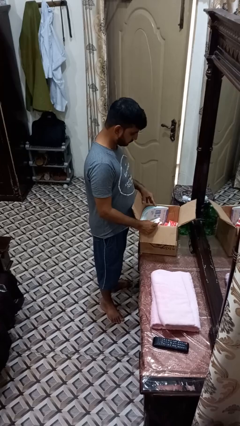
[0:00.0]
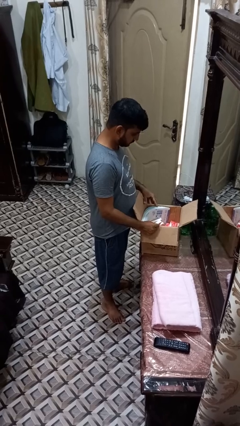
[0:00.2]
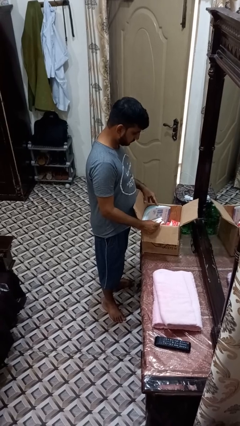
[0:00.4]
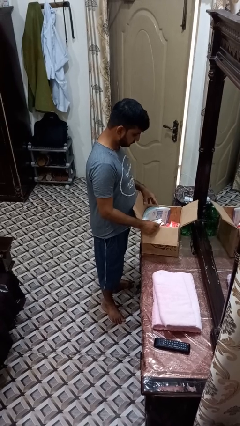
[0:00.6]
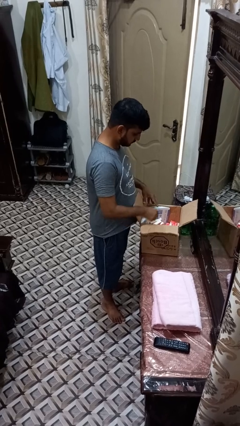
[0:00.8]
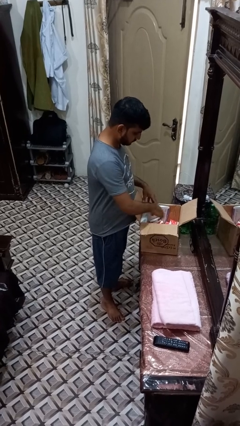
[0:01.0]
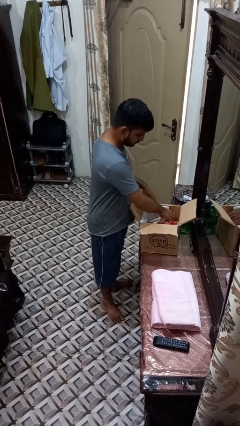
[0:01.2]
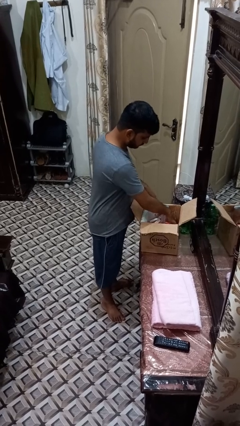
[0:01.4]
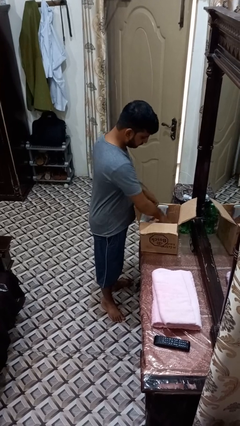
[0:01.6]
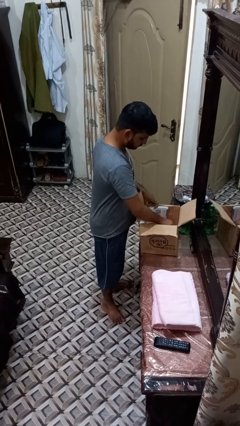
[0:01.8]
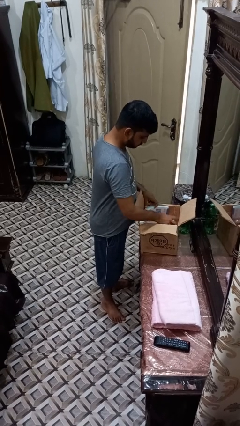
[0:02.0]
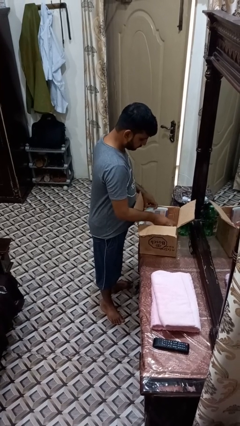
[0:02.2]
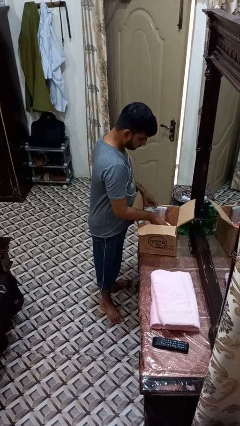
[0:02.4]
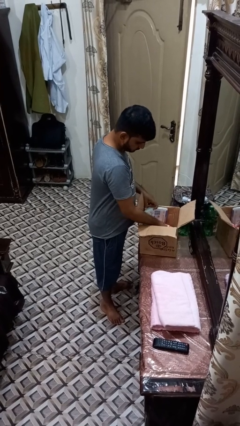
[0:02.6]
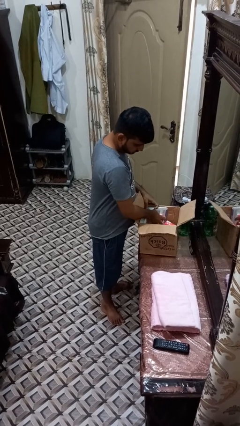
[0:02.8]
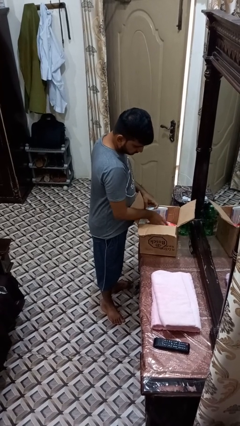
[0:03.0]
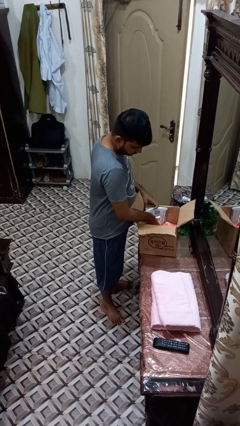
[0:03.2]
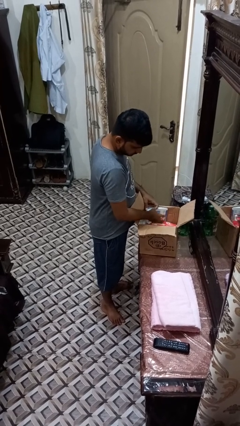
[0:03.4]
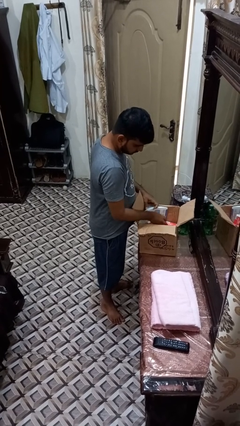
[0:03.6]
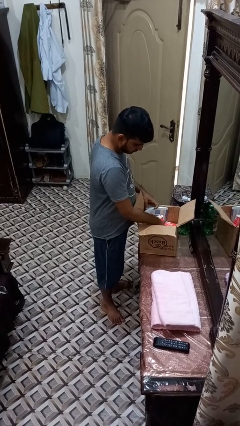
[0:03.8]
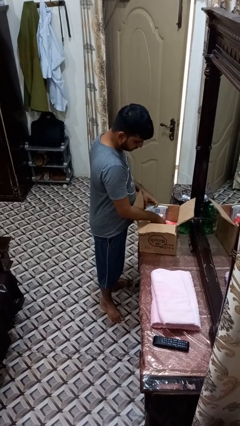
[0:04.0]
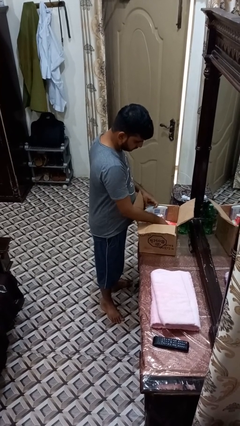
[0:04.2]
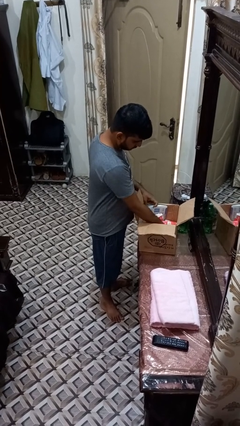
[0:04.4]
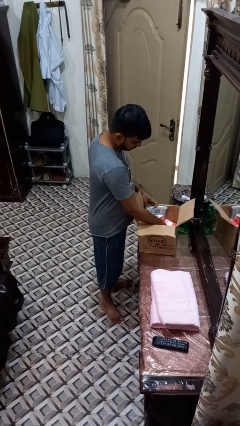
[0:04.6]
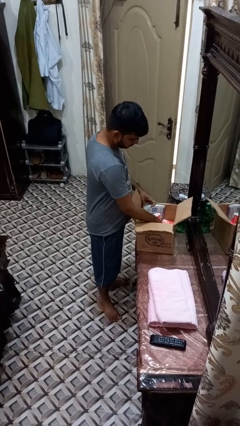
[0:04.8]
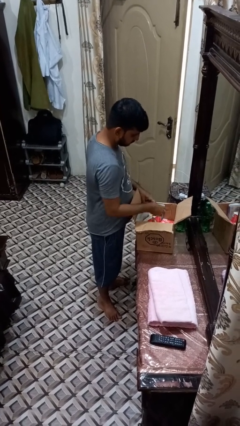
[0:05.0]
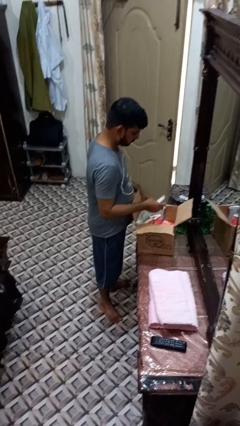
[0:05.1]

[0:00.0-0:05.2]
person searches in box

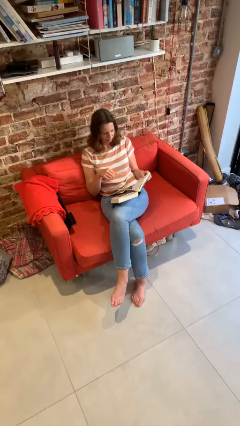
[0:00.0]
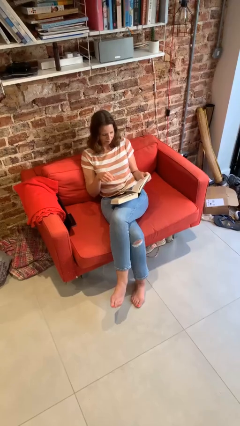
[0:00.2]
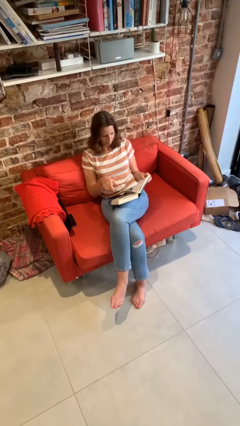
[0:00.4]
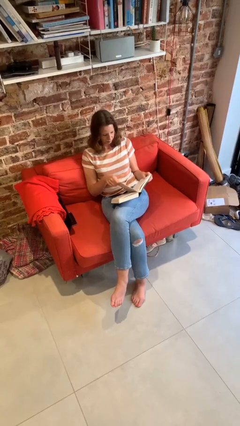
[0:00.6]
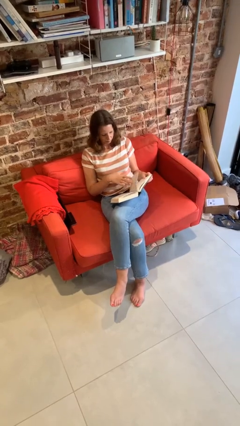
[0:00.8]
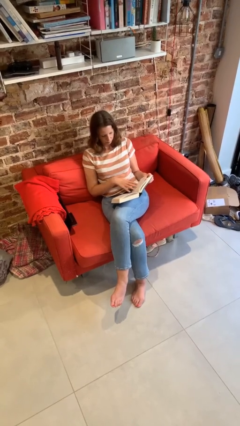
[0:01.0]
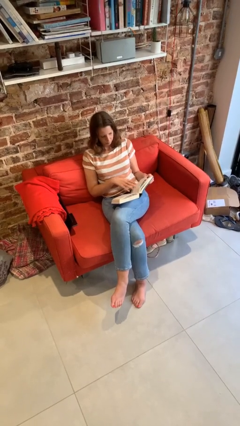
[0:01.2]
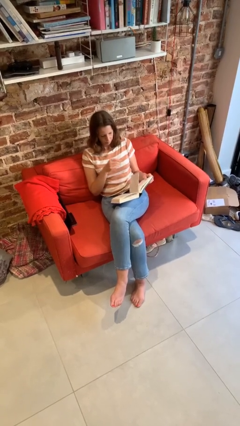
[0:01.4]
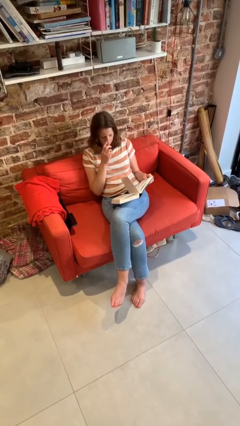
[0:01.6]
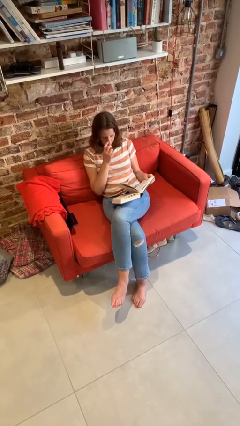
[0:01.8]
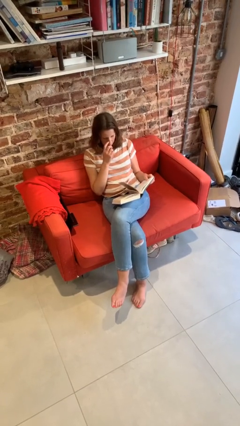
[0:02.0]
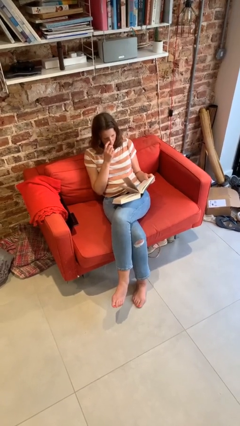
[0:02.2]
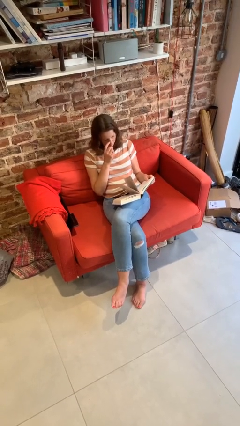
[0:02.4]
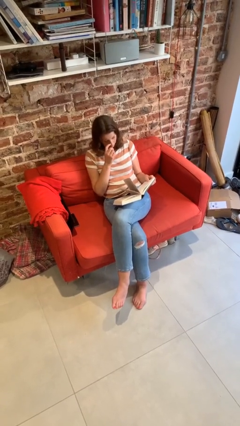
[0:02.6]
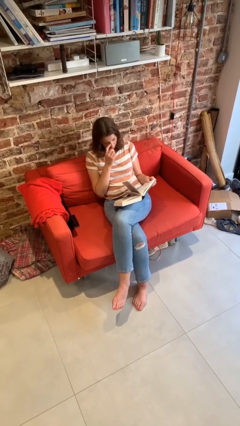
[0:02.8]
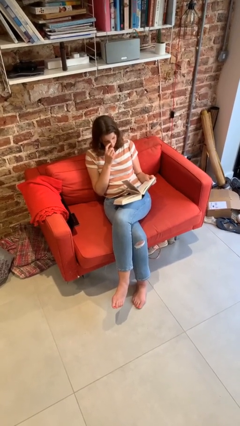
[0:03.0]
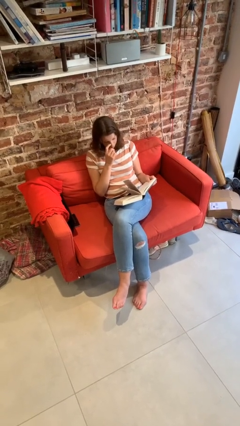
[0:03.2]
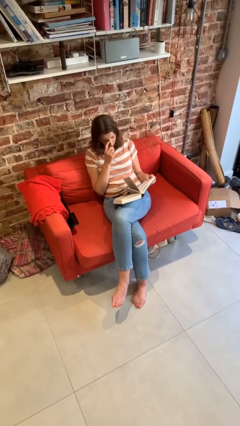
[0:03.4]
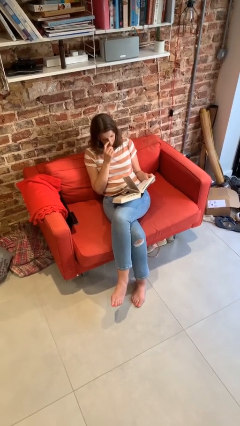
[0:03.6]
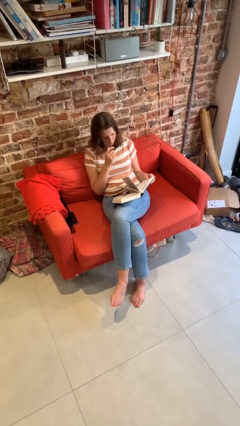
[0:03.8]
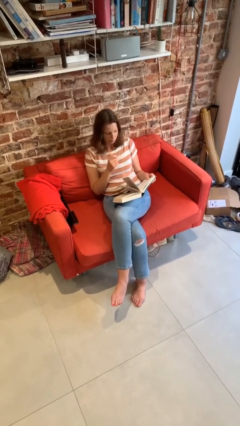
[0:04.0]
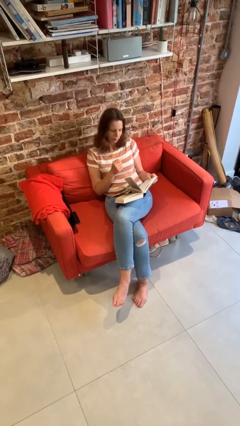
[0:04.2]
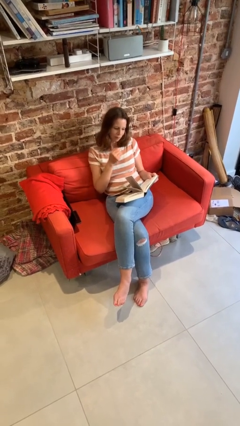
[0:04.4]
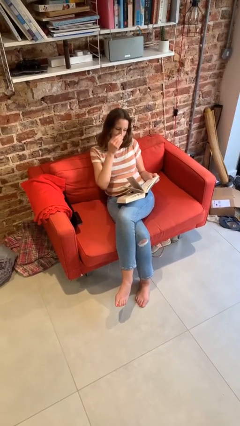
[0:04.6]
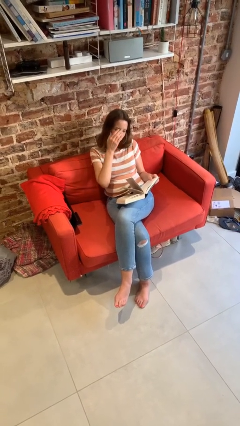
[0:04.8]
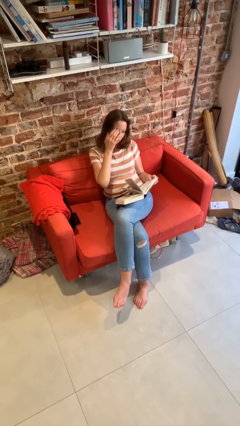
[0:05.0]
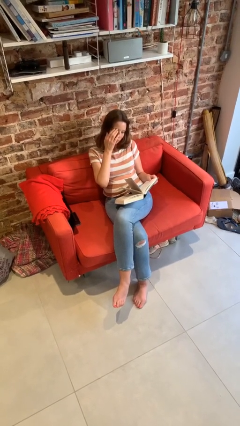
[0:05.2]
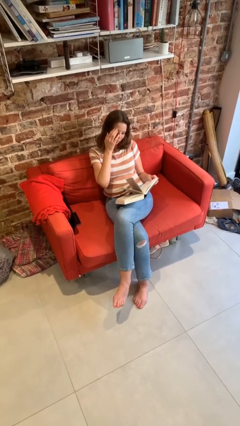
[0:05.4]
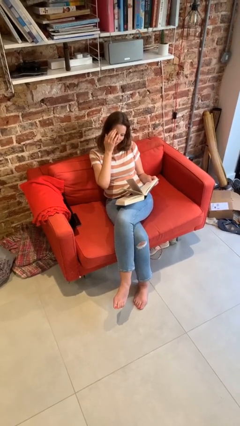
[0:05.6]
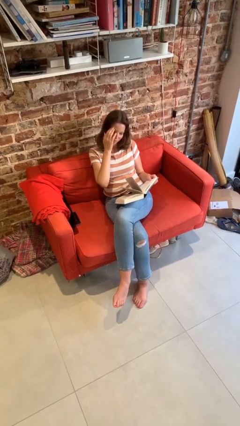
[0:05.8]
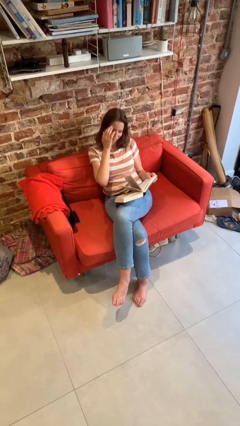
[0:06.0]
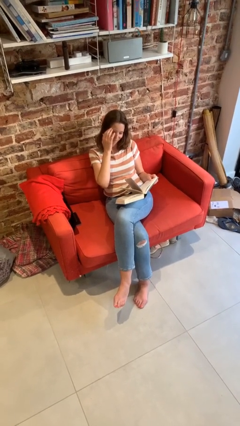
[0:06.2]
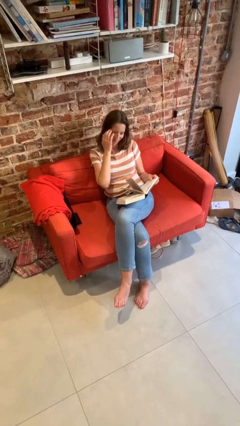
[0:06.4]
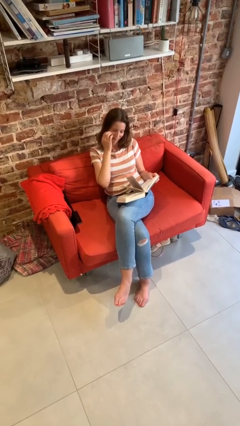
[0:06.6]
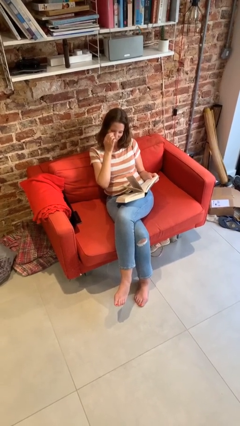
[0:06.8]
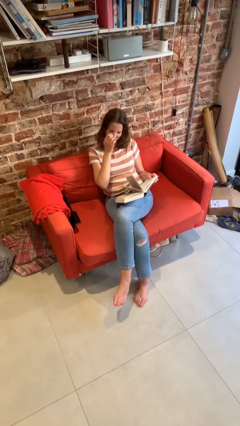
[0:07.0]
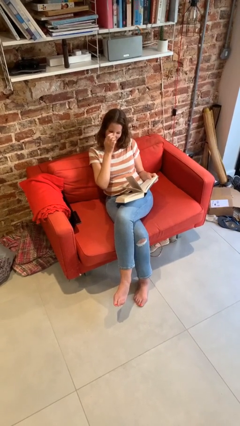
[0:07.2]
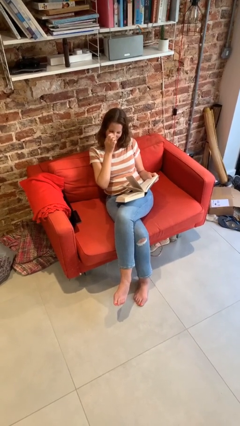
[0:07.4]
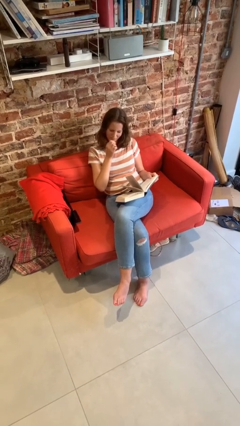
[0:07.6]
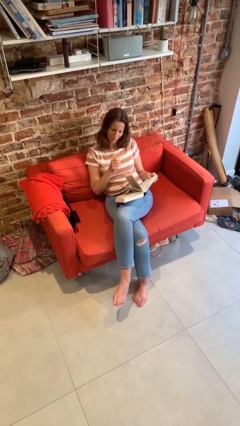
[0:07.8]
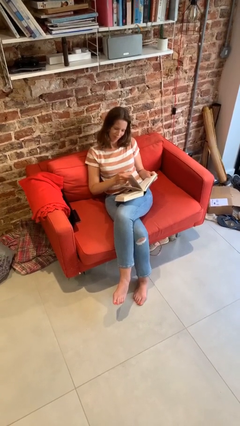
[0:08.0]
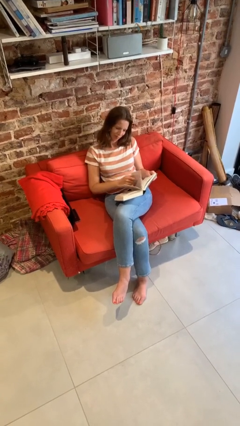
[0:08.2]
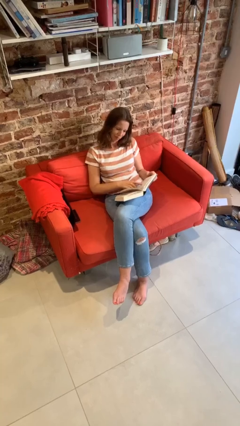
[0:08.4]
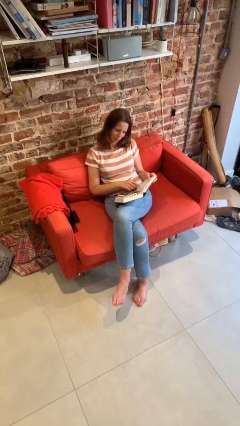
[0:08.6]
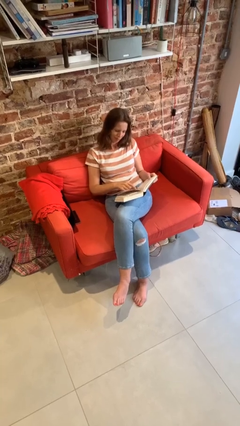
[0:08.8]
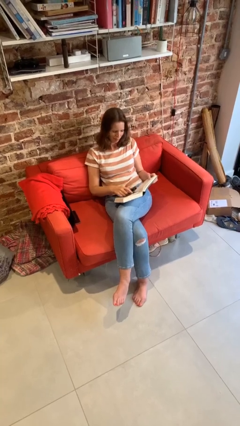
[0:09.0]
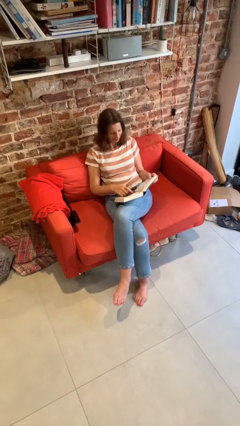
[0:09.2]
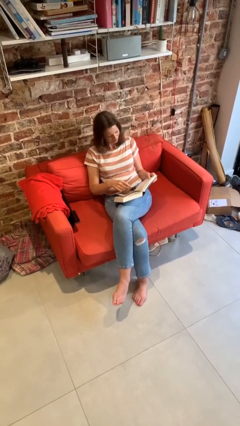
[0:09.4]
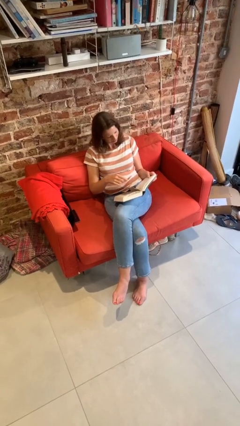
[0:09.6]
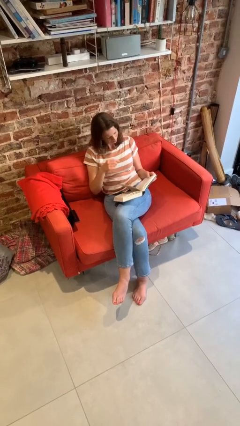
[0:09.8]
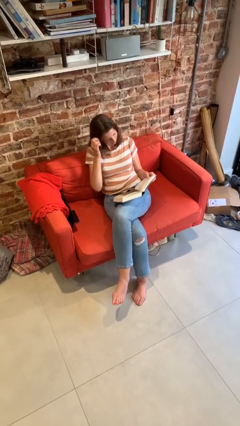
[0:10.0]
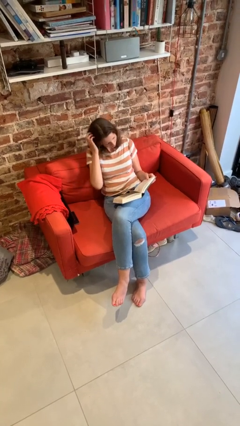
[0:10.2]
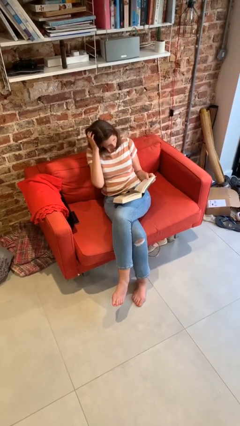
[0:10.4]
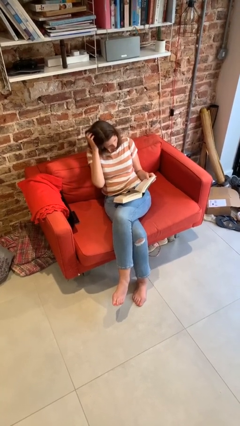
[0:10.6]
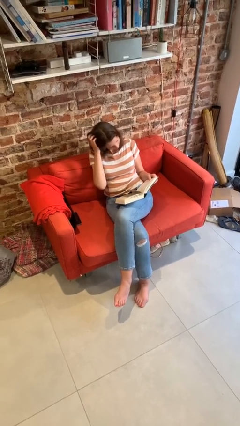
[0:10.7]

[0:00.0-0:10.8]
person reads document

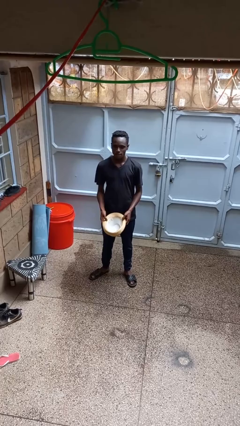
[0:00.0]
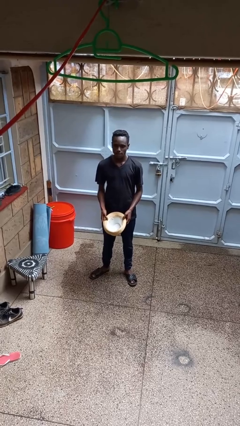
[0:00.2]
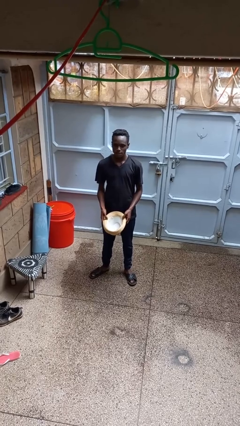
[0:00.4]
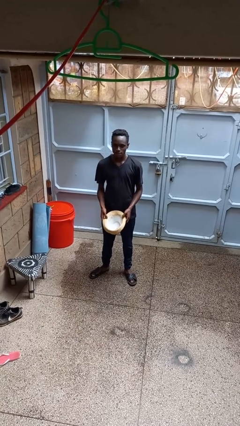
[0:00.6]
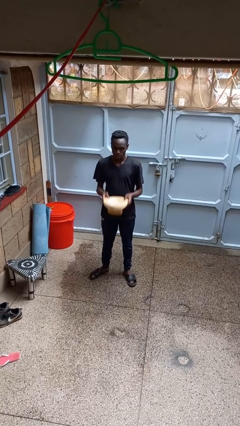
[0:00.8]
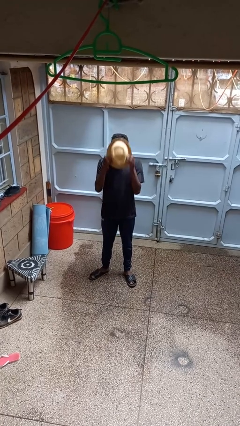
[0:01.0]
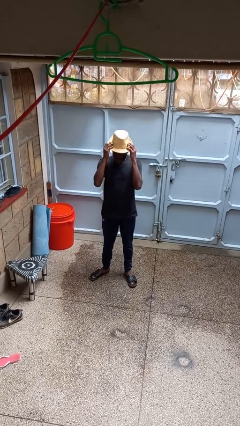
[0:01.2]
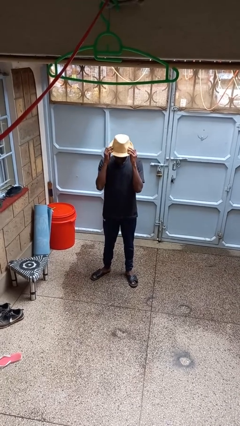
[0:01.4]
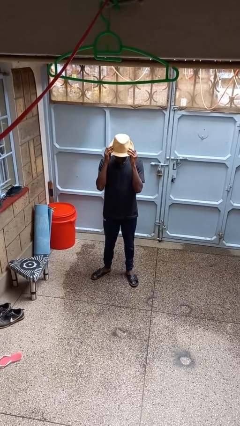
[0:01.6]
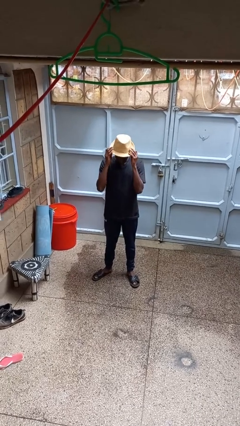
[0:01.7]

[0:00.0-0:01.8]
person puts on hat

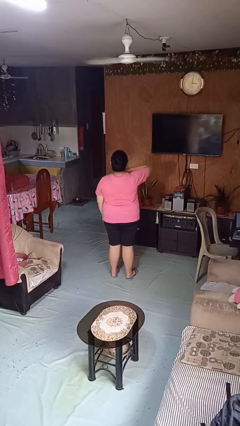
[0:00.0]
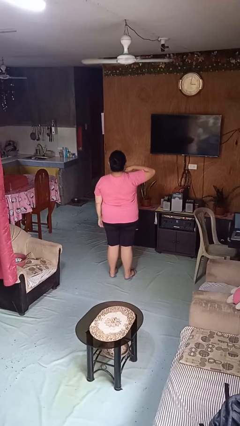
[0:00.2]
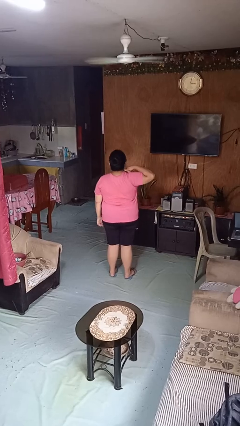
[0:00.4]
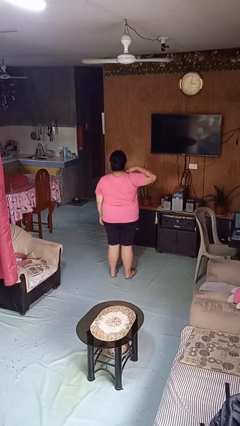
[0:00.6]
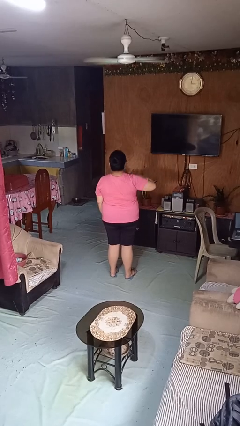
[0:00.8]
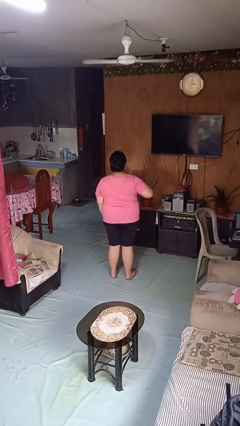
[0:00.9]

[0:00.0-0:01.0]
person gestures cut
